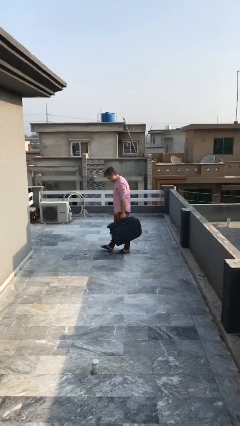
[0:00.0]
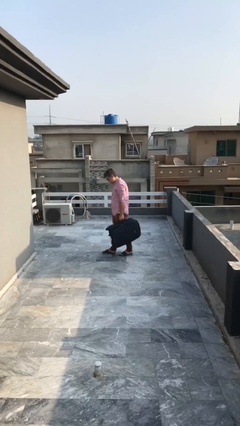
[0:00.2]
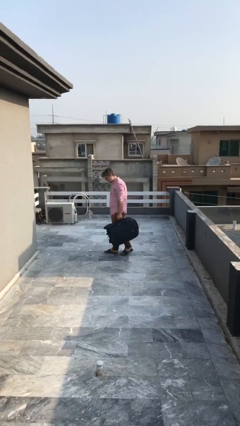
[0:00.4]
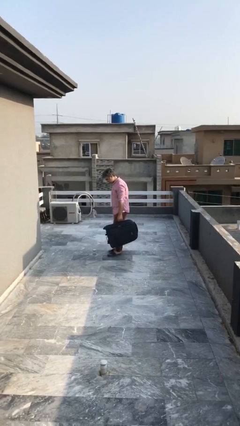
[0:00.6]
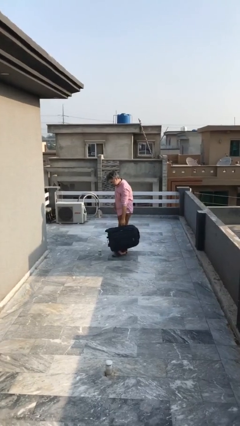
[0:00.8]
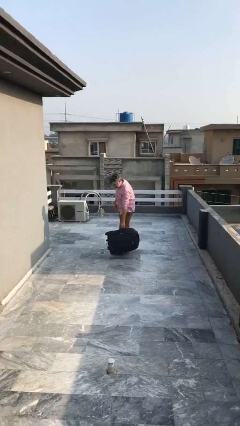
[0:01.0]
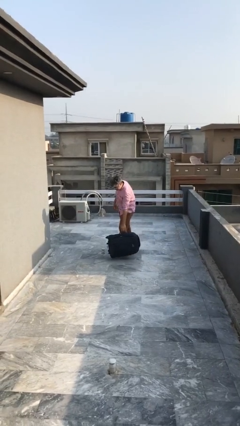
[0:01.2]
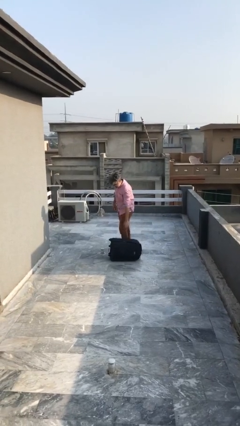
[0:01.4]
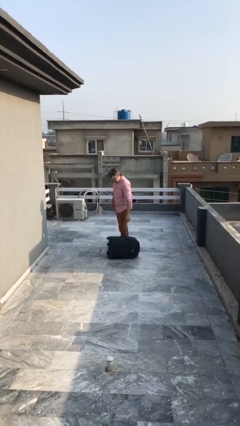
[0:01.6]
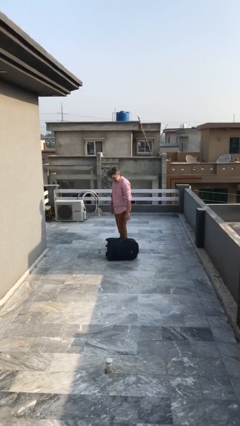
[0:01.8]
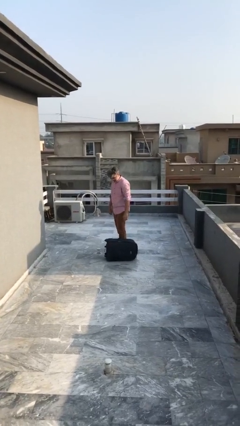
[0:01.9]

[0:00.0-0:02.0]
person puts down object on floor

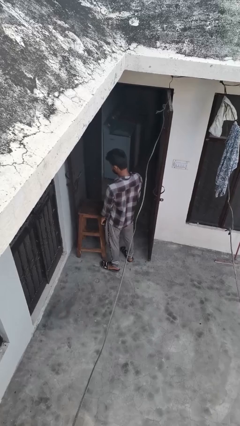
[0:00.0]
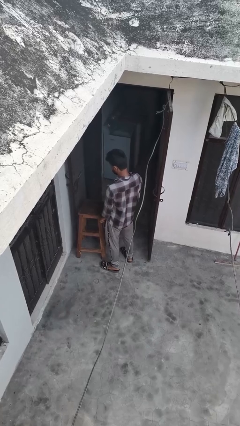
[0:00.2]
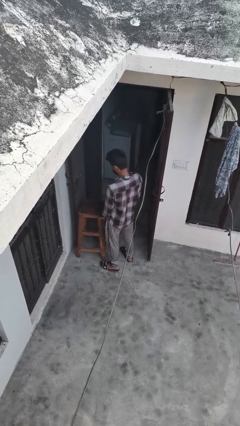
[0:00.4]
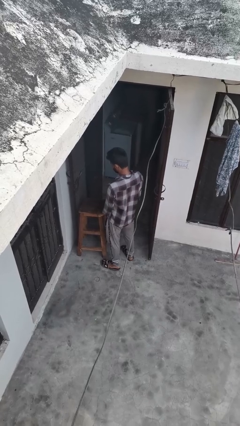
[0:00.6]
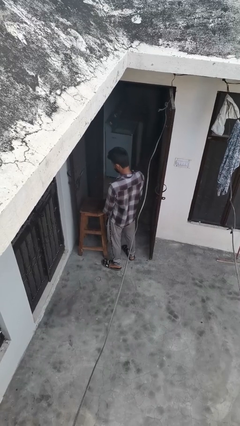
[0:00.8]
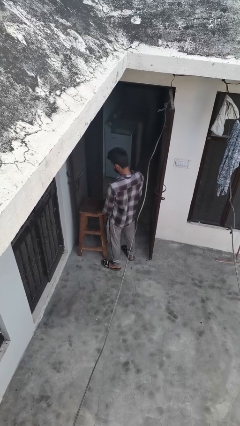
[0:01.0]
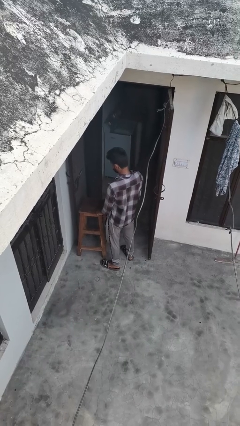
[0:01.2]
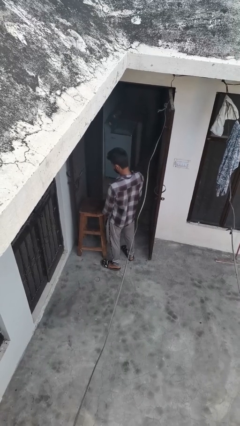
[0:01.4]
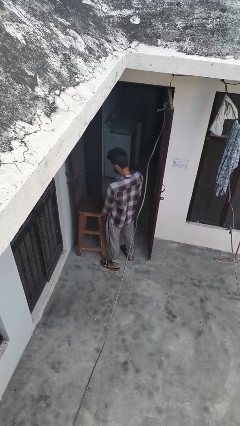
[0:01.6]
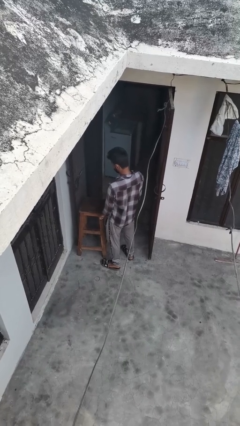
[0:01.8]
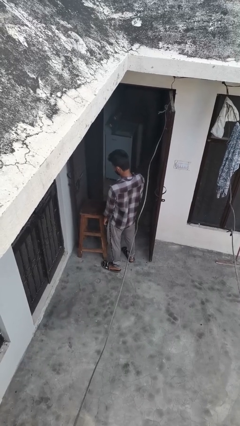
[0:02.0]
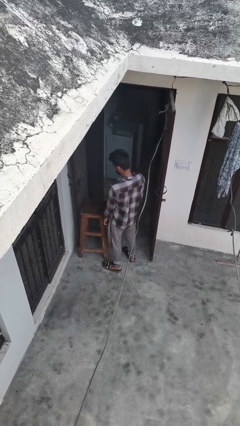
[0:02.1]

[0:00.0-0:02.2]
person taps object with finger

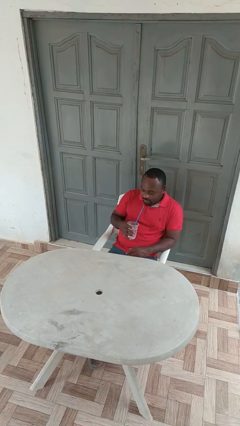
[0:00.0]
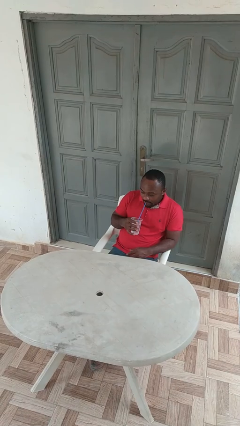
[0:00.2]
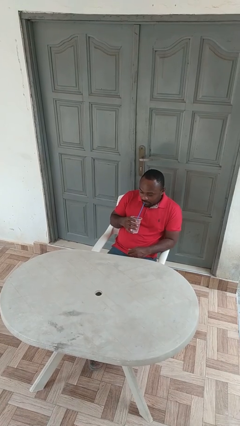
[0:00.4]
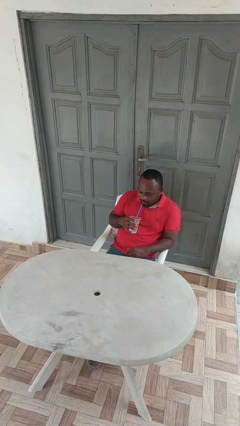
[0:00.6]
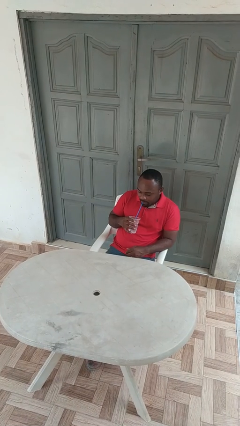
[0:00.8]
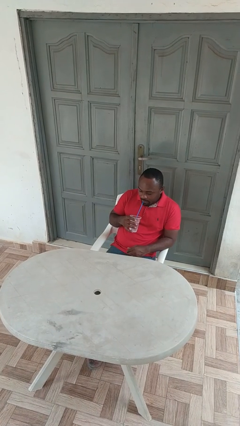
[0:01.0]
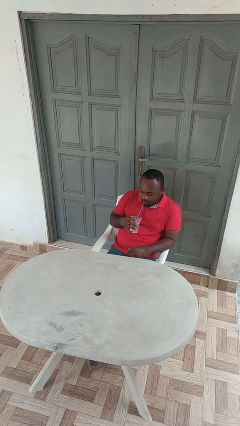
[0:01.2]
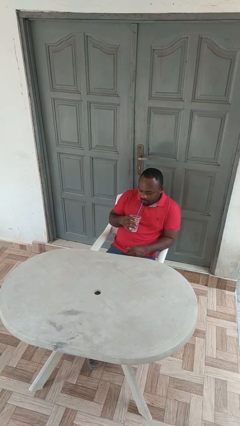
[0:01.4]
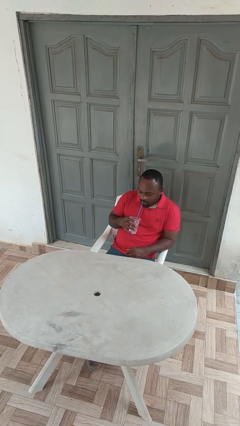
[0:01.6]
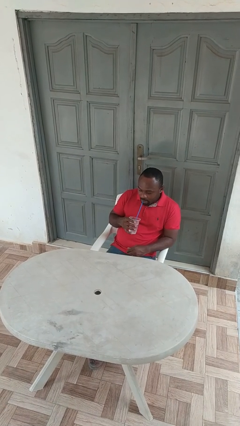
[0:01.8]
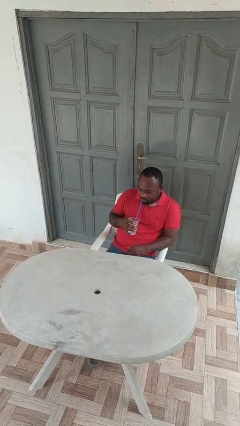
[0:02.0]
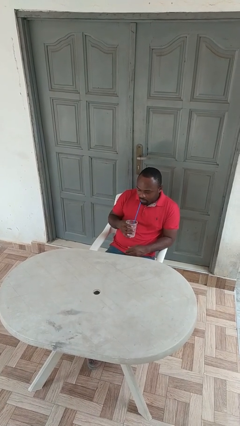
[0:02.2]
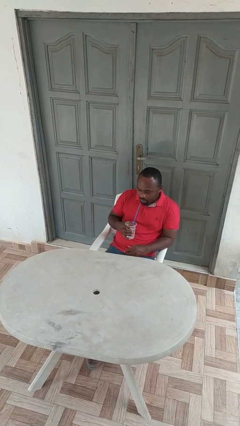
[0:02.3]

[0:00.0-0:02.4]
person drinks from straw

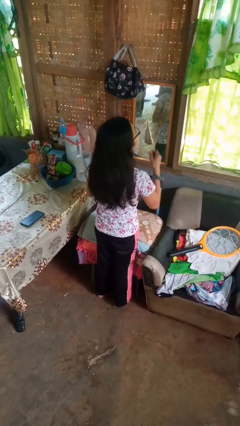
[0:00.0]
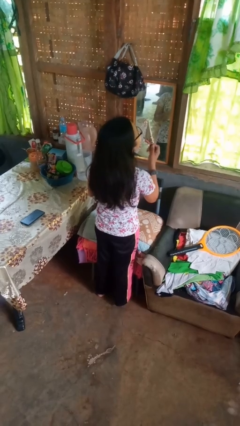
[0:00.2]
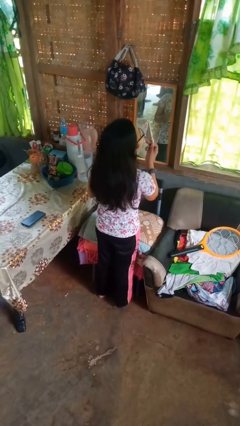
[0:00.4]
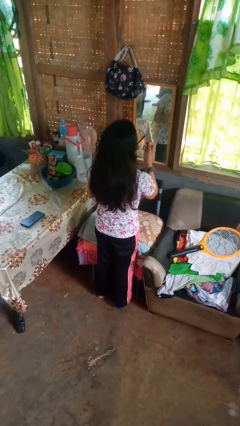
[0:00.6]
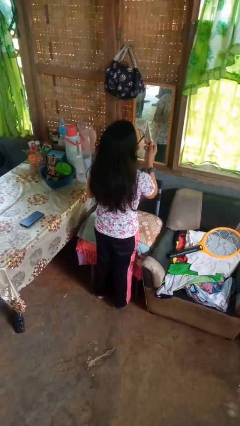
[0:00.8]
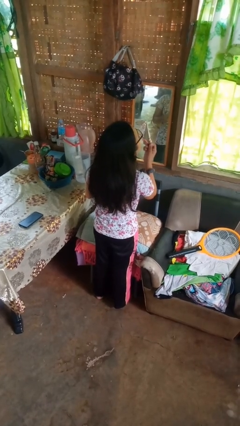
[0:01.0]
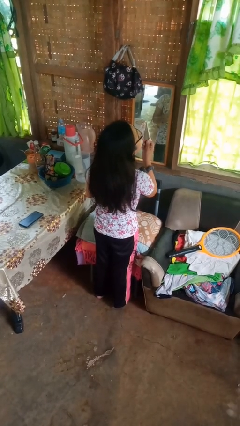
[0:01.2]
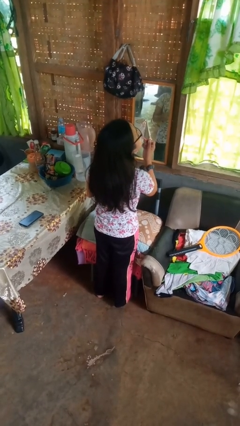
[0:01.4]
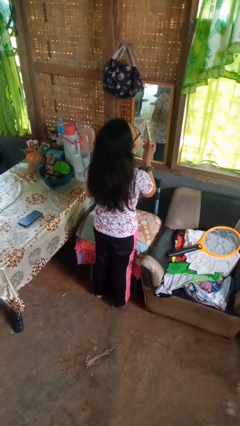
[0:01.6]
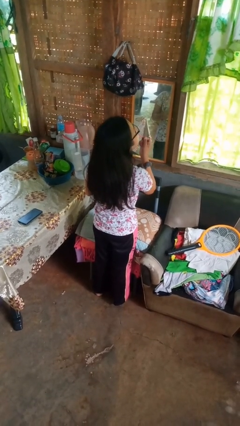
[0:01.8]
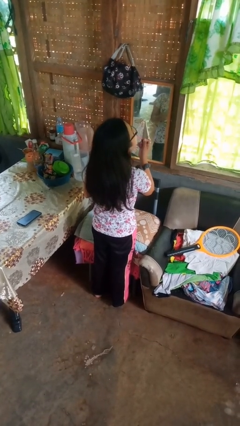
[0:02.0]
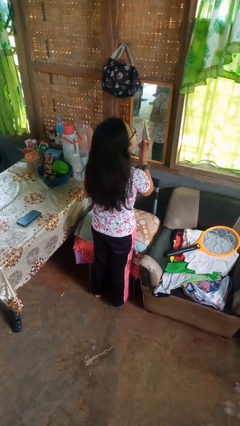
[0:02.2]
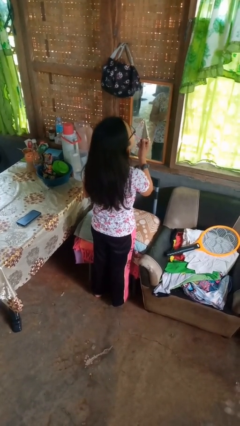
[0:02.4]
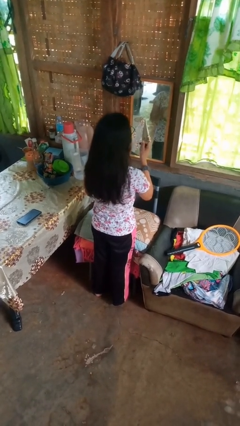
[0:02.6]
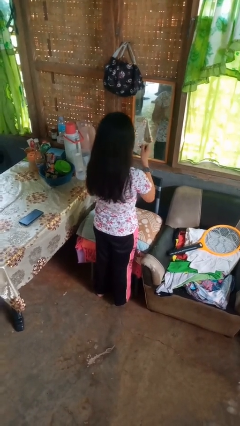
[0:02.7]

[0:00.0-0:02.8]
person applies lip makeup

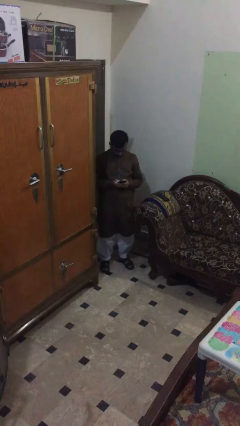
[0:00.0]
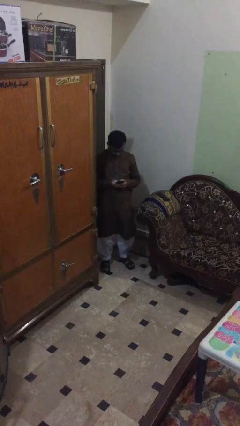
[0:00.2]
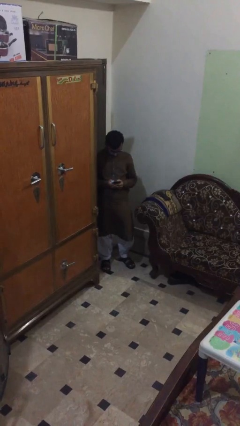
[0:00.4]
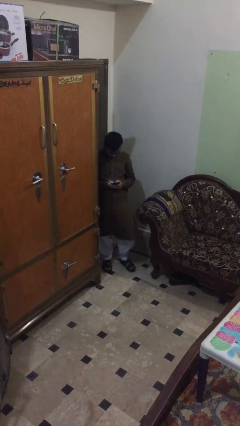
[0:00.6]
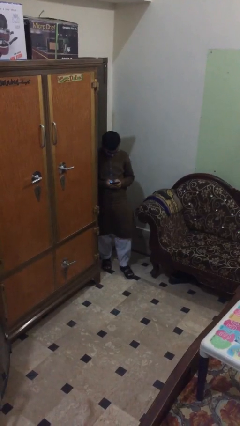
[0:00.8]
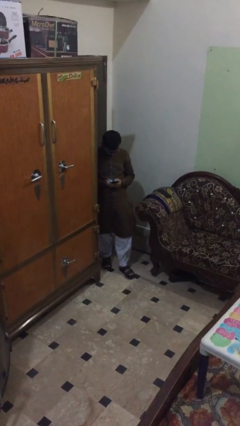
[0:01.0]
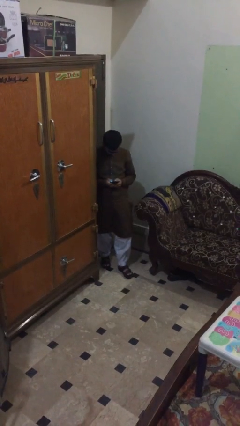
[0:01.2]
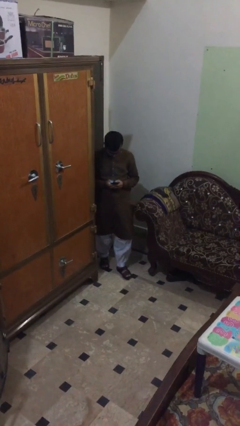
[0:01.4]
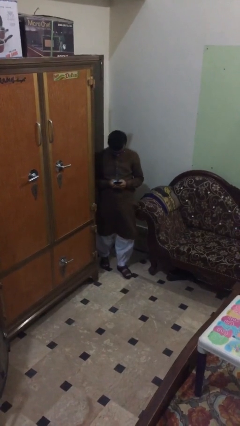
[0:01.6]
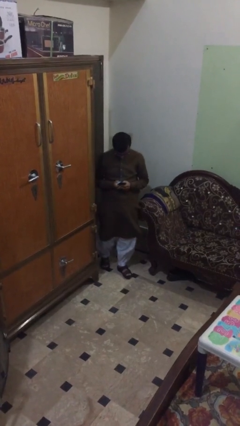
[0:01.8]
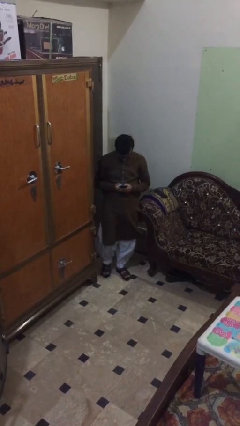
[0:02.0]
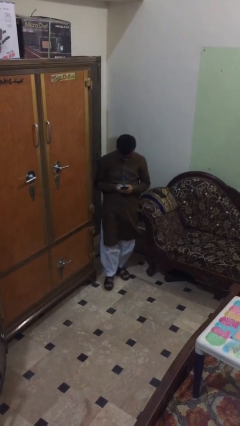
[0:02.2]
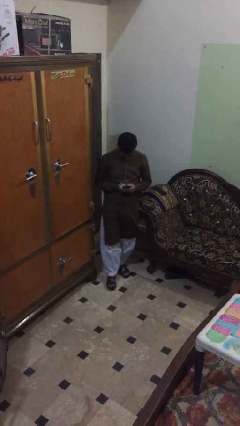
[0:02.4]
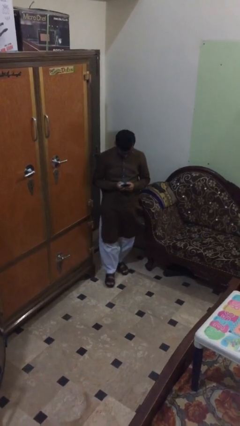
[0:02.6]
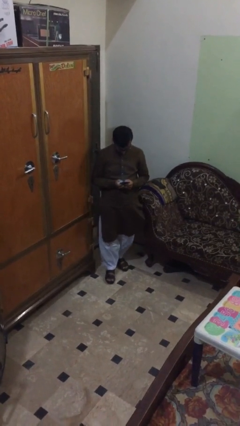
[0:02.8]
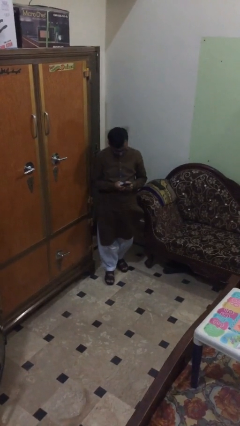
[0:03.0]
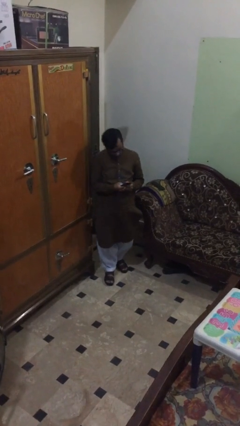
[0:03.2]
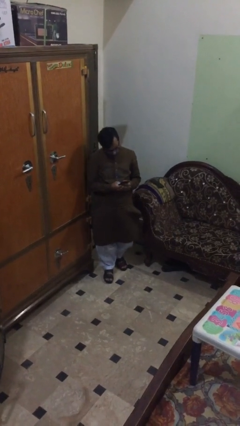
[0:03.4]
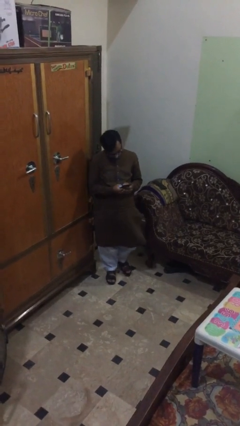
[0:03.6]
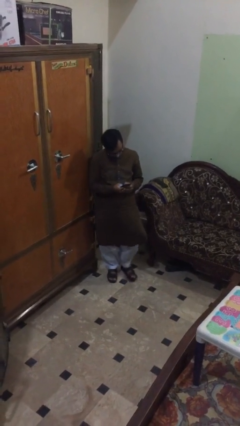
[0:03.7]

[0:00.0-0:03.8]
person texts on phone

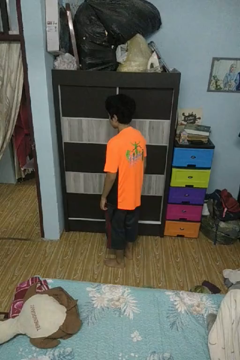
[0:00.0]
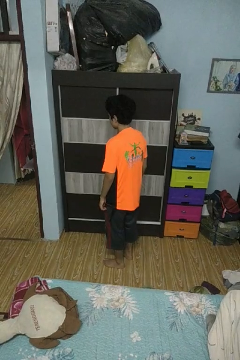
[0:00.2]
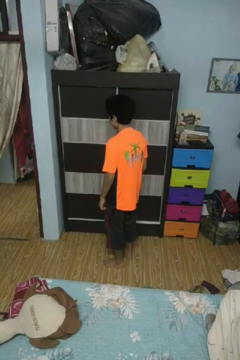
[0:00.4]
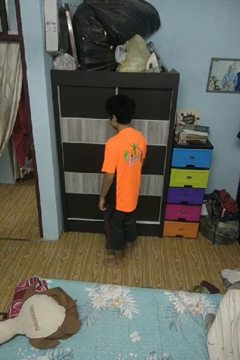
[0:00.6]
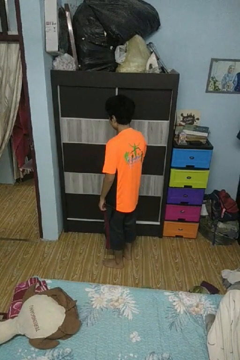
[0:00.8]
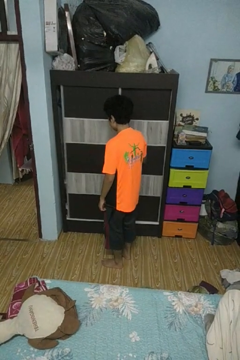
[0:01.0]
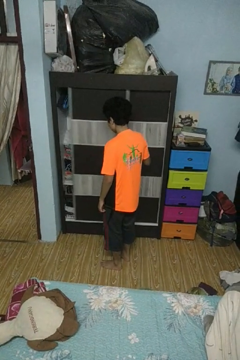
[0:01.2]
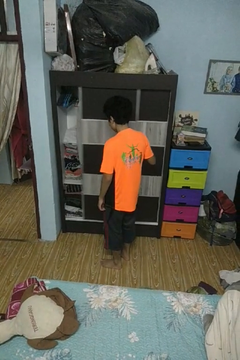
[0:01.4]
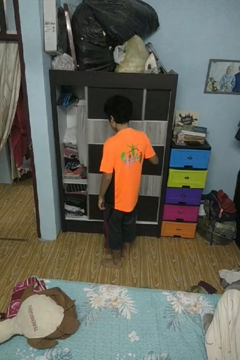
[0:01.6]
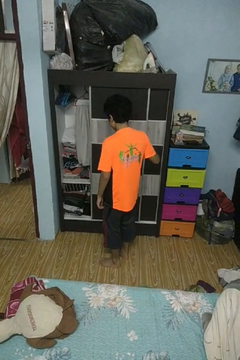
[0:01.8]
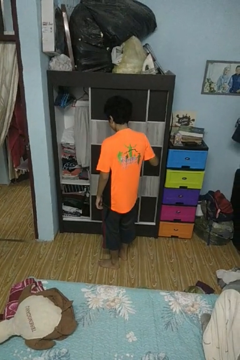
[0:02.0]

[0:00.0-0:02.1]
person opens closet door

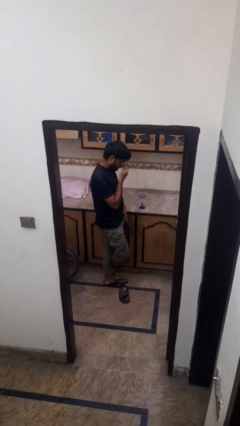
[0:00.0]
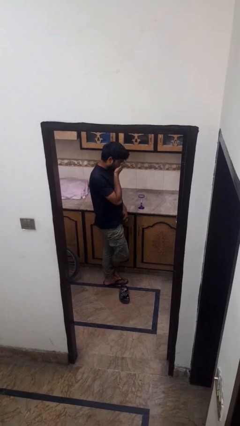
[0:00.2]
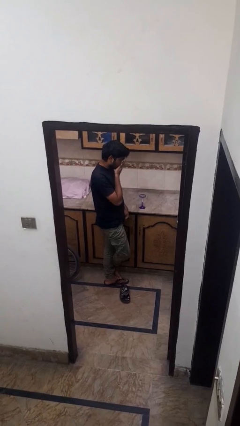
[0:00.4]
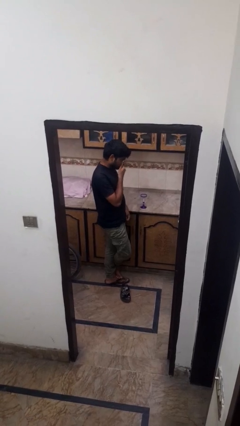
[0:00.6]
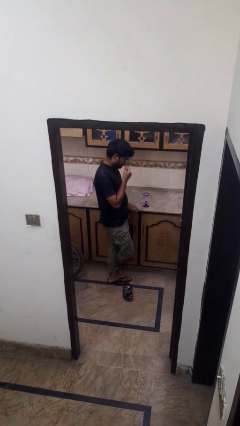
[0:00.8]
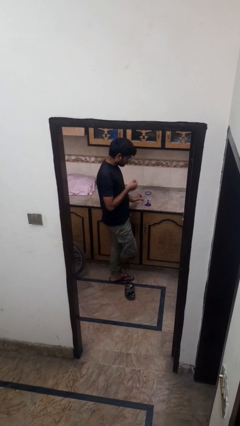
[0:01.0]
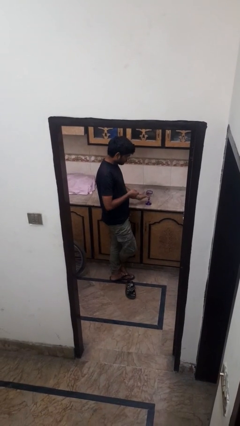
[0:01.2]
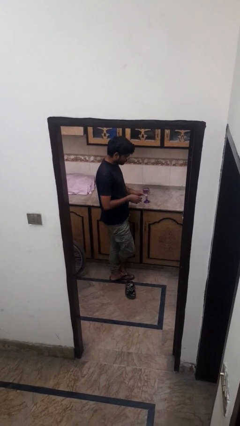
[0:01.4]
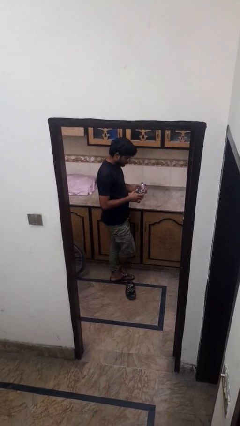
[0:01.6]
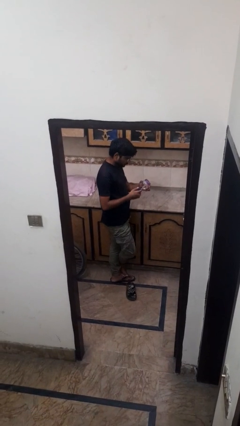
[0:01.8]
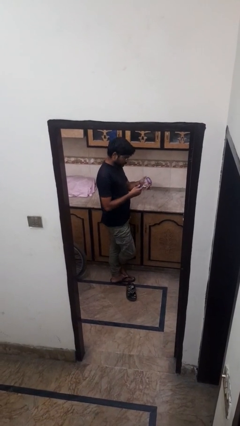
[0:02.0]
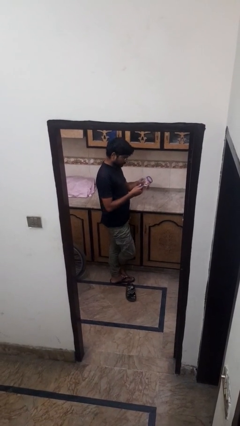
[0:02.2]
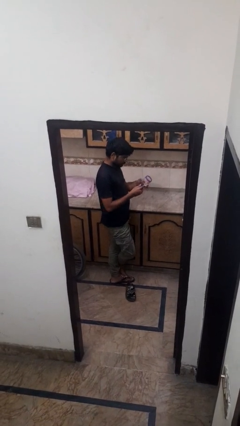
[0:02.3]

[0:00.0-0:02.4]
person picks up object from countertop
